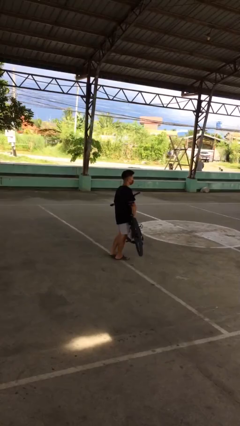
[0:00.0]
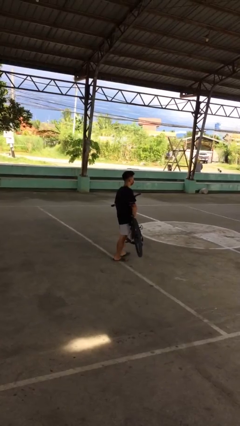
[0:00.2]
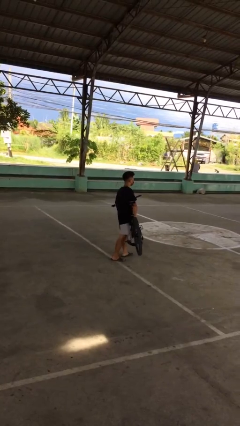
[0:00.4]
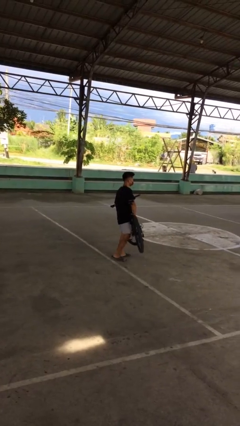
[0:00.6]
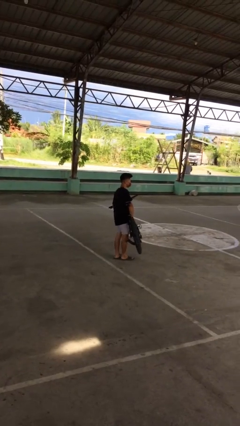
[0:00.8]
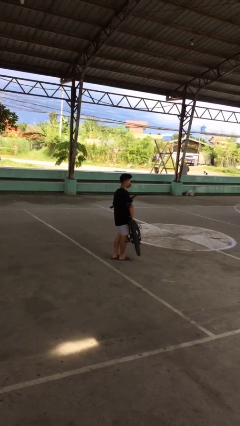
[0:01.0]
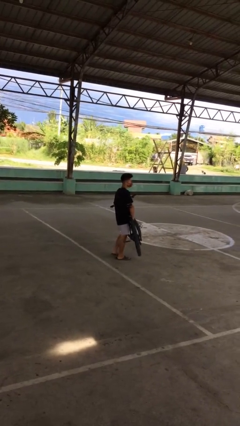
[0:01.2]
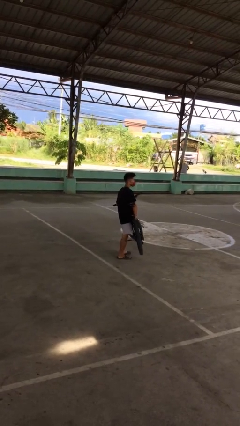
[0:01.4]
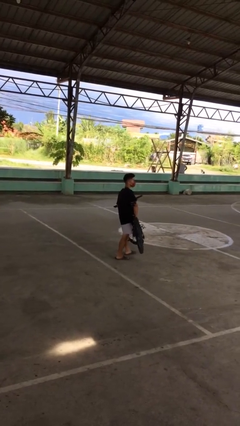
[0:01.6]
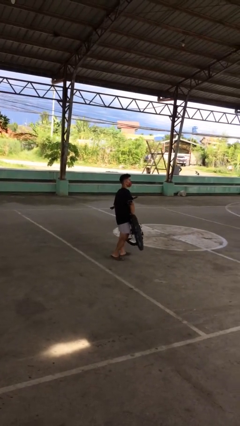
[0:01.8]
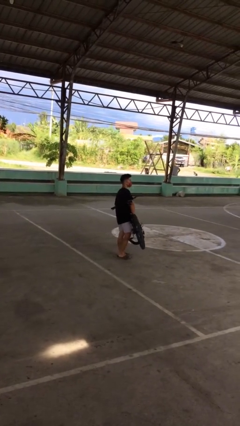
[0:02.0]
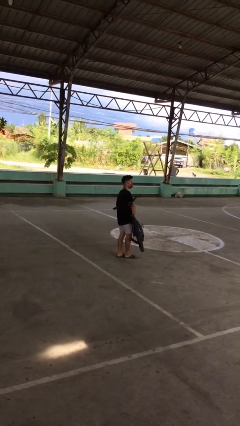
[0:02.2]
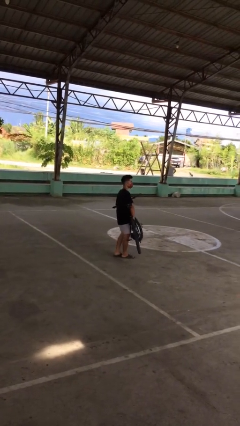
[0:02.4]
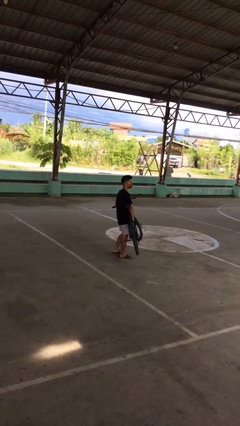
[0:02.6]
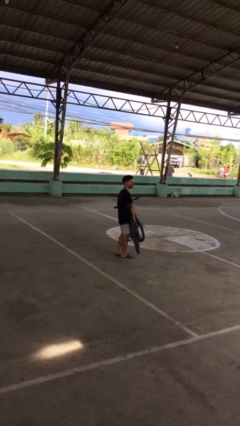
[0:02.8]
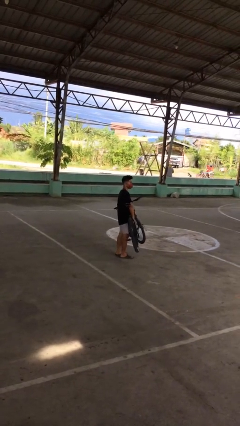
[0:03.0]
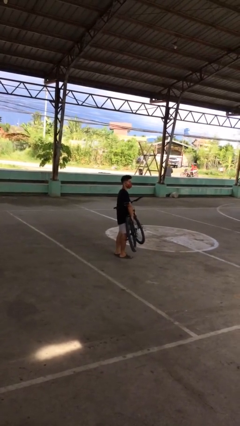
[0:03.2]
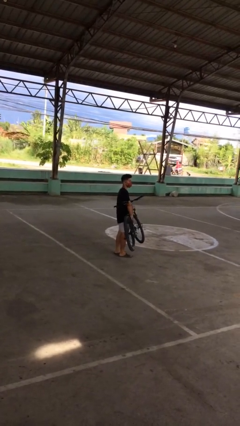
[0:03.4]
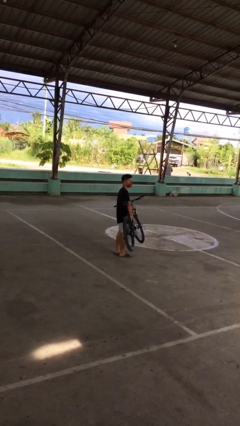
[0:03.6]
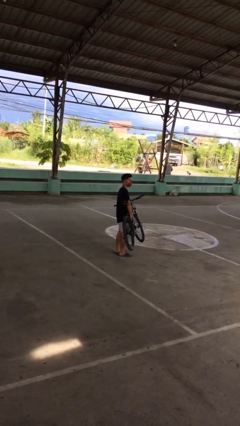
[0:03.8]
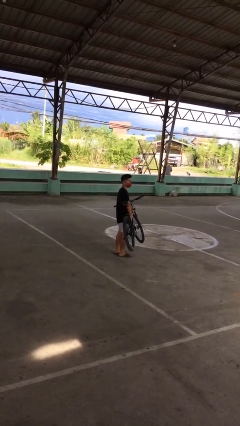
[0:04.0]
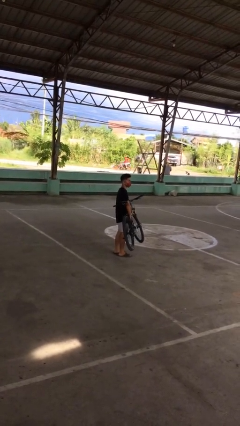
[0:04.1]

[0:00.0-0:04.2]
person carries bicycle

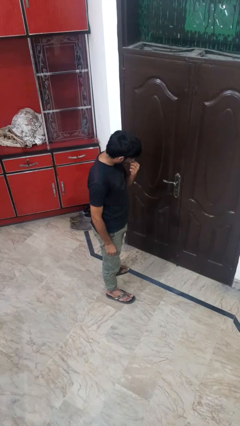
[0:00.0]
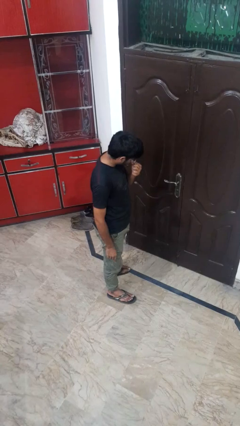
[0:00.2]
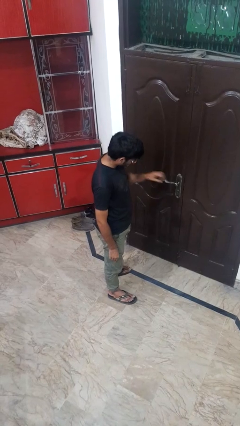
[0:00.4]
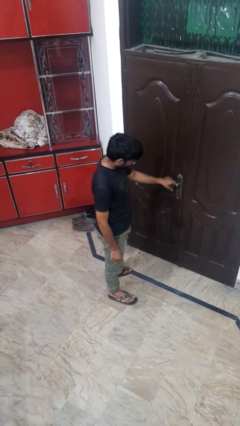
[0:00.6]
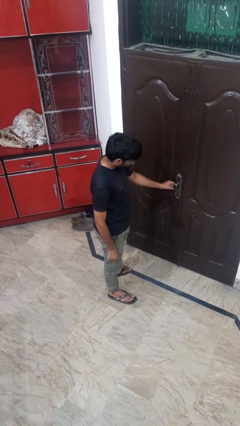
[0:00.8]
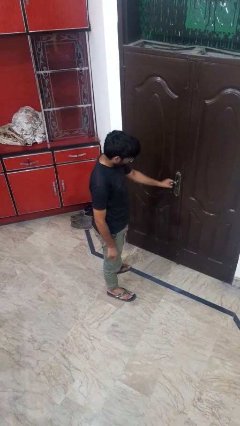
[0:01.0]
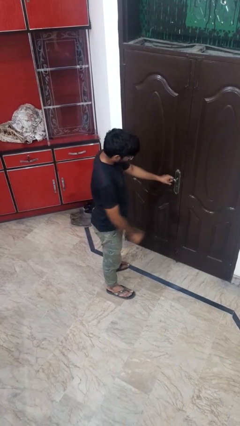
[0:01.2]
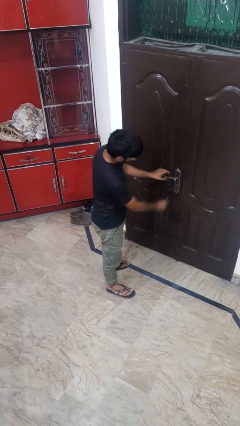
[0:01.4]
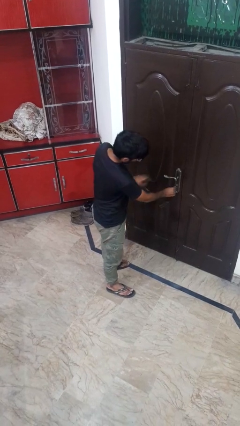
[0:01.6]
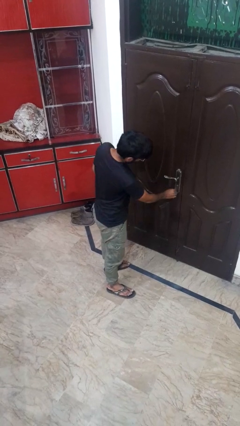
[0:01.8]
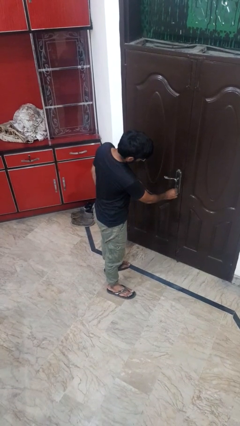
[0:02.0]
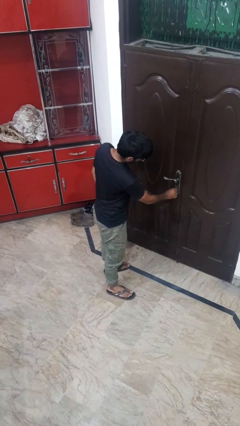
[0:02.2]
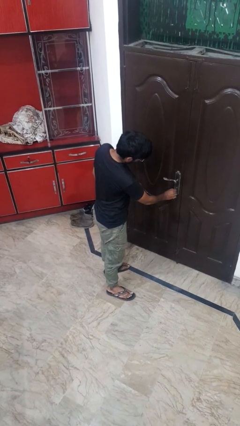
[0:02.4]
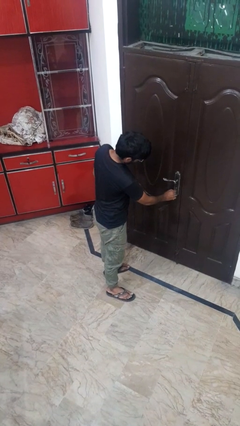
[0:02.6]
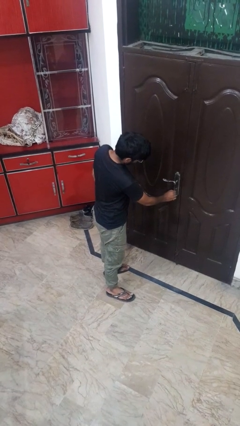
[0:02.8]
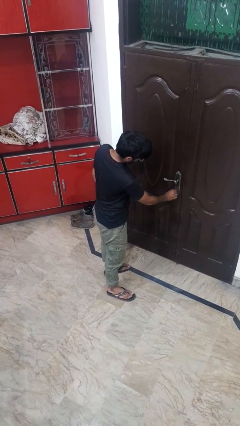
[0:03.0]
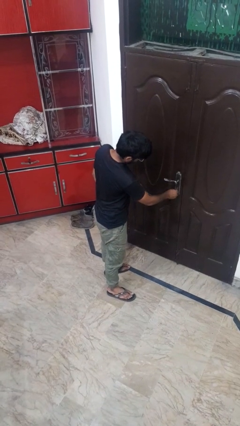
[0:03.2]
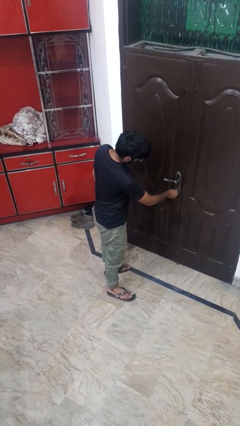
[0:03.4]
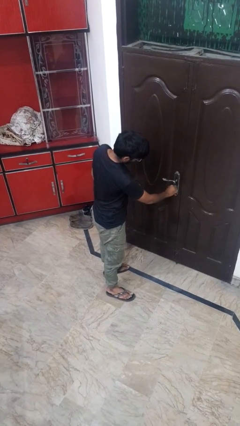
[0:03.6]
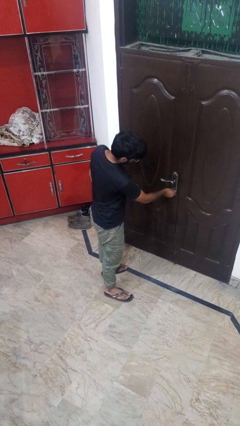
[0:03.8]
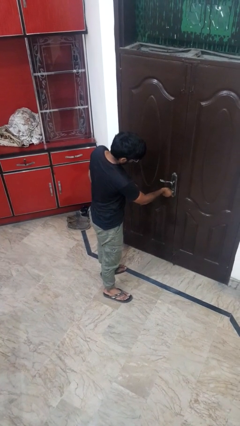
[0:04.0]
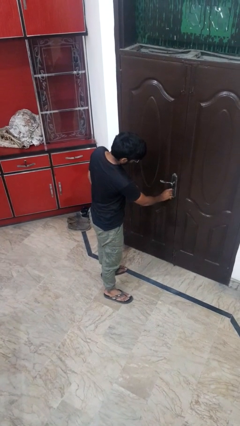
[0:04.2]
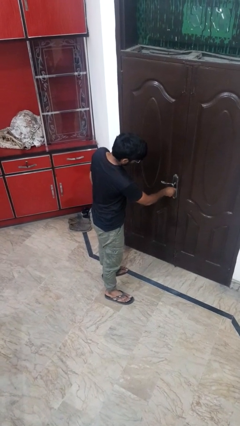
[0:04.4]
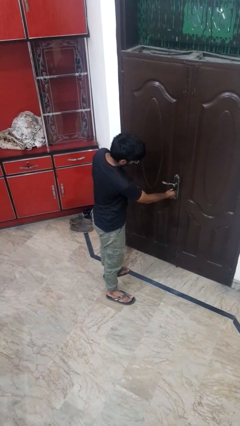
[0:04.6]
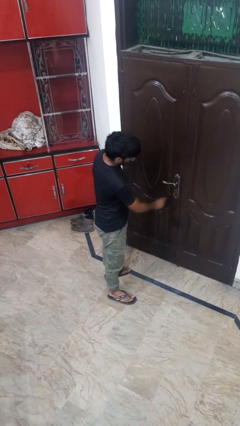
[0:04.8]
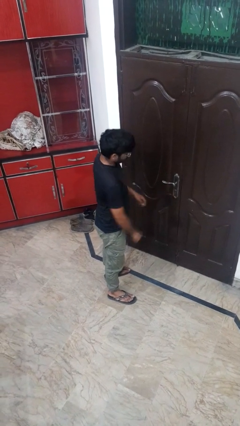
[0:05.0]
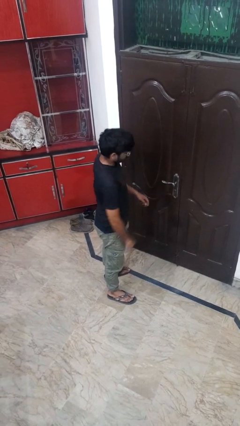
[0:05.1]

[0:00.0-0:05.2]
person unlocks door with keys

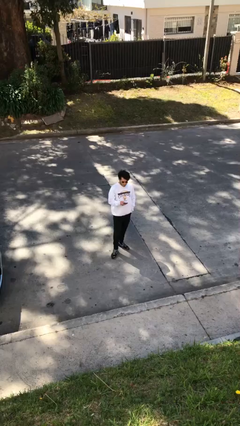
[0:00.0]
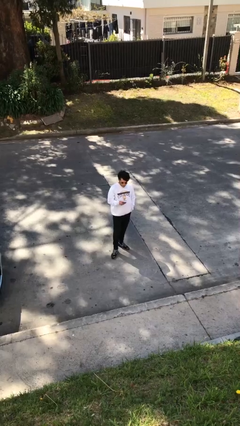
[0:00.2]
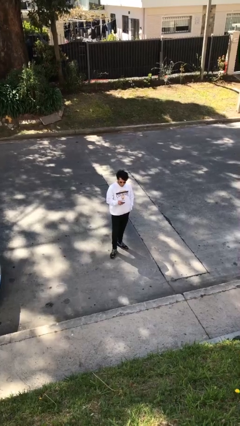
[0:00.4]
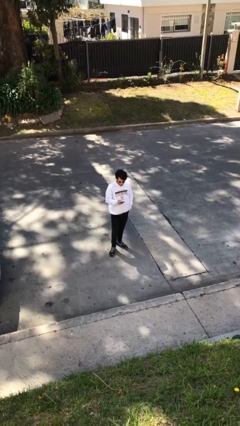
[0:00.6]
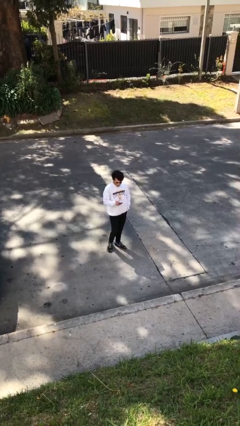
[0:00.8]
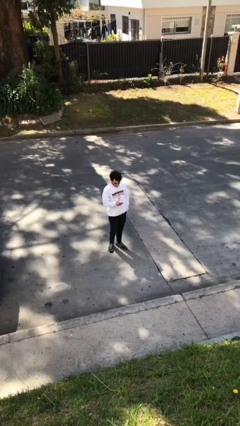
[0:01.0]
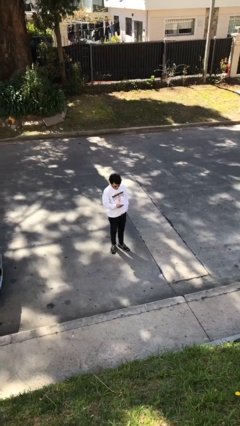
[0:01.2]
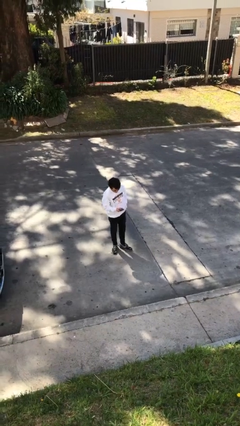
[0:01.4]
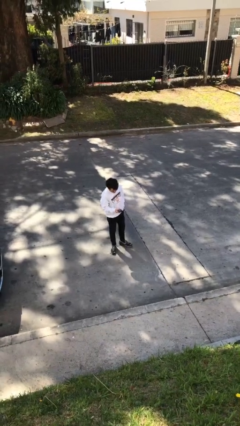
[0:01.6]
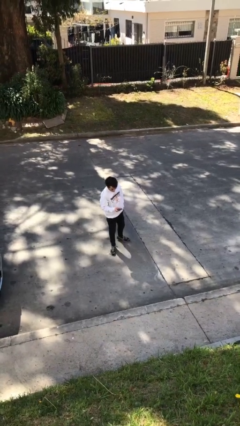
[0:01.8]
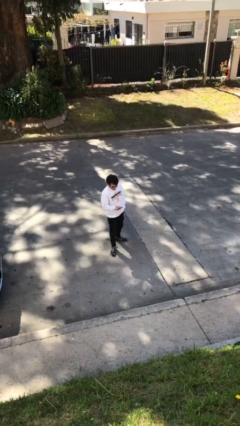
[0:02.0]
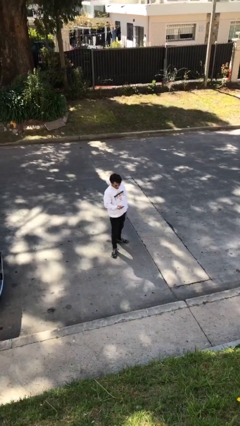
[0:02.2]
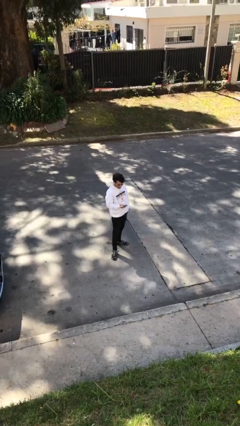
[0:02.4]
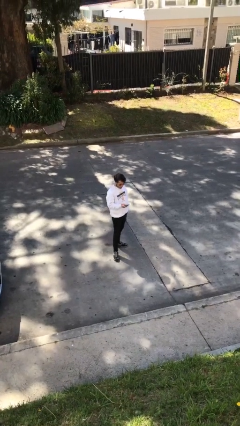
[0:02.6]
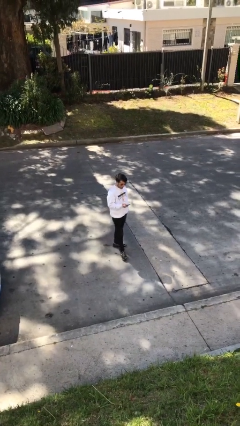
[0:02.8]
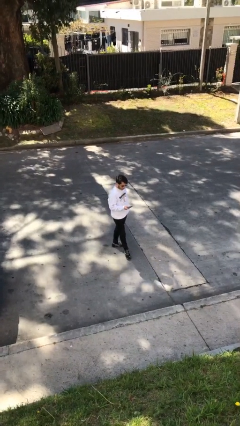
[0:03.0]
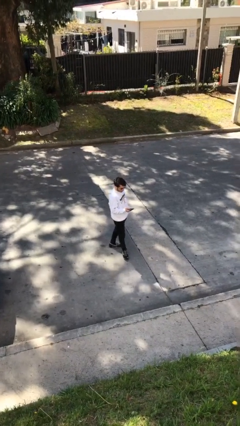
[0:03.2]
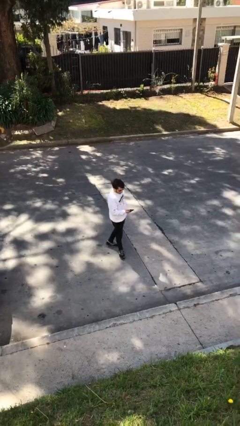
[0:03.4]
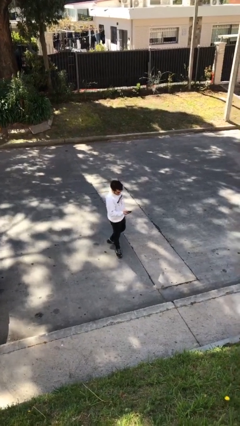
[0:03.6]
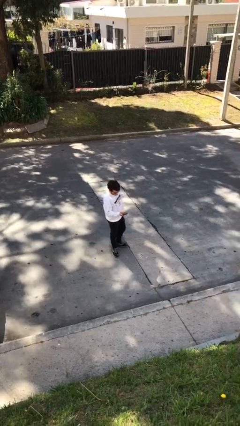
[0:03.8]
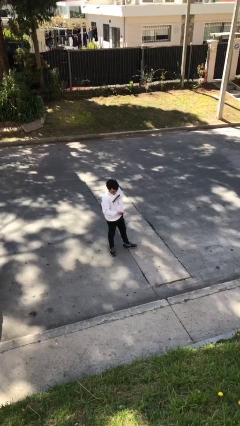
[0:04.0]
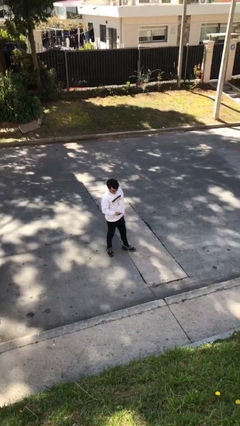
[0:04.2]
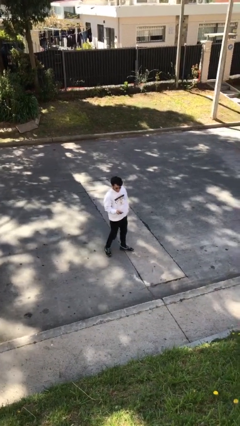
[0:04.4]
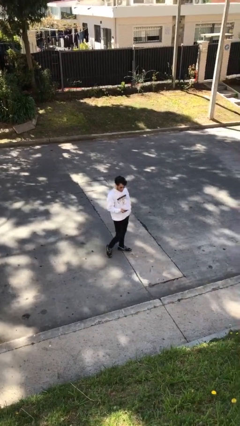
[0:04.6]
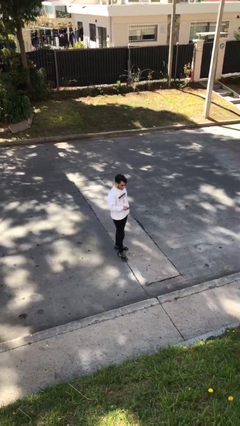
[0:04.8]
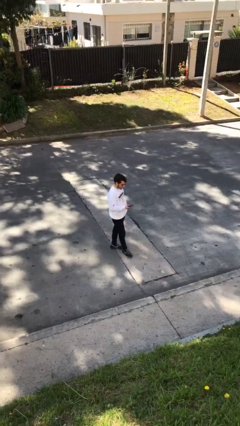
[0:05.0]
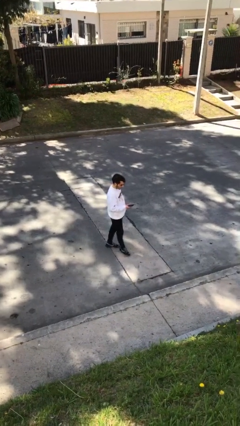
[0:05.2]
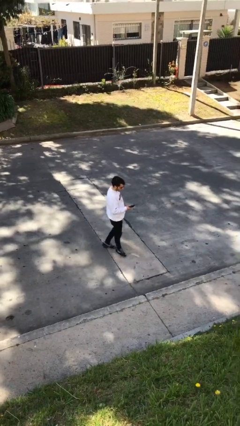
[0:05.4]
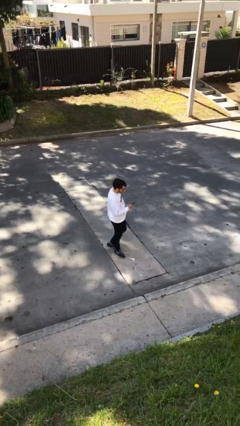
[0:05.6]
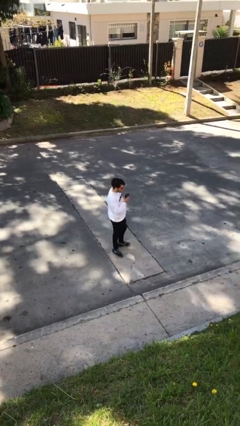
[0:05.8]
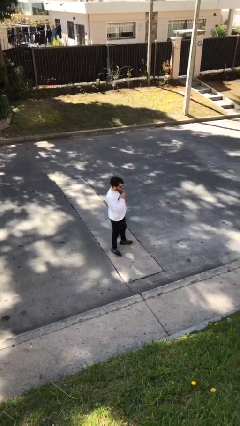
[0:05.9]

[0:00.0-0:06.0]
person texts on phone

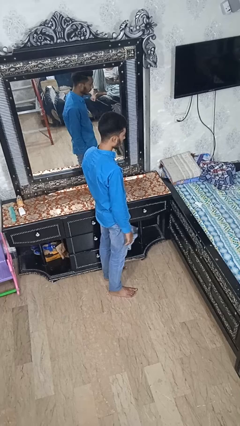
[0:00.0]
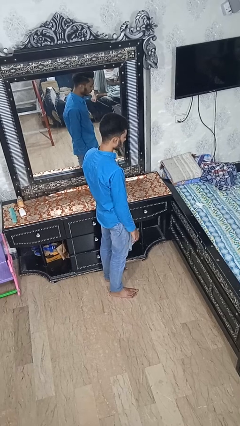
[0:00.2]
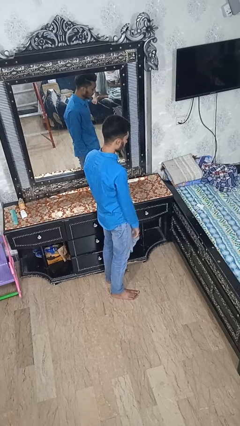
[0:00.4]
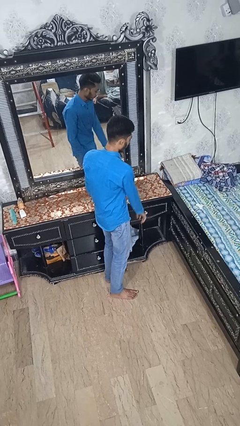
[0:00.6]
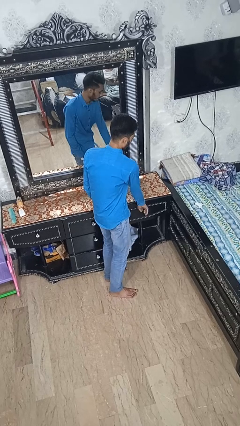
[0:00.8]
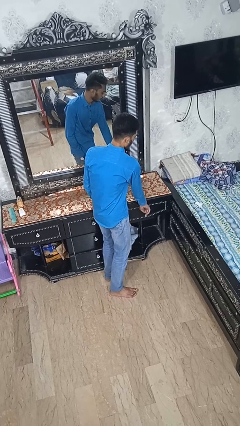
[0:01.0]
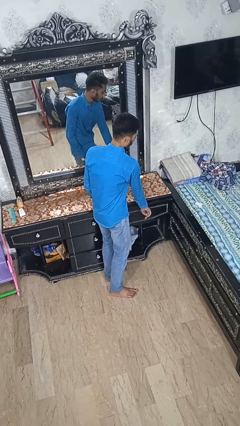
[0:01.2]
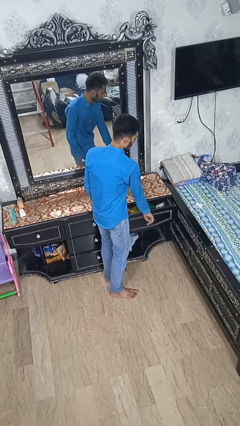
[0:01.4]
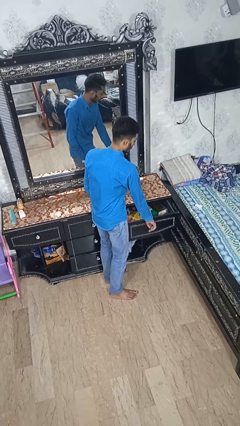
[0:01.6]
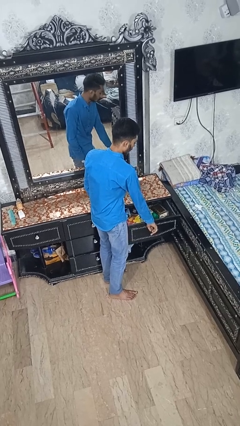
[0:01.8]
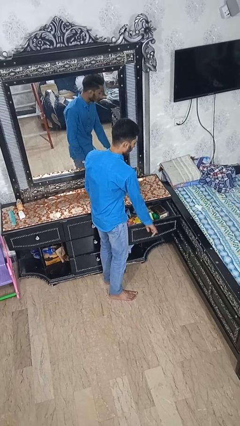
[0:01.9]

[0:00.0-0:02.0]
person opens dresser drawer

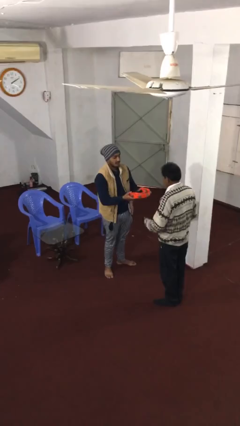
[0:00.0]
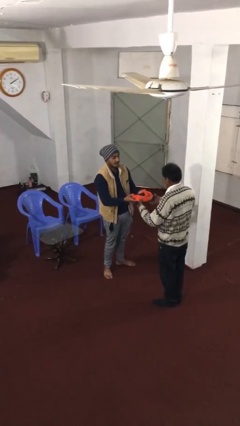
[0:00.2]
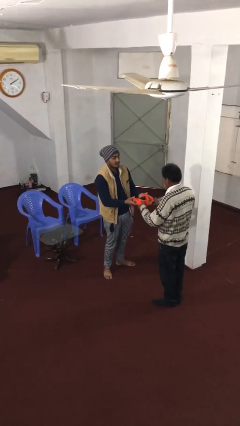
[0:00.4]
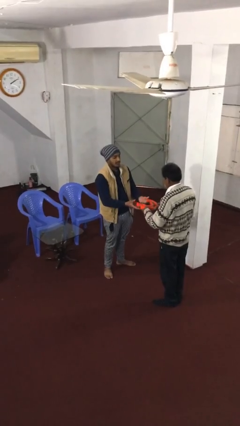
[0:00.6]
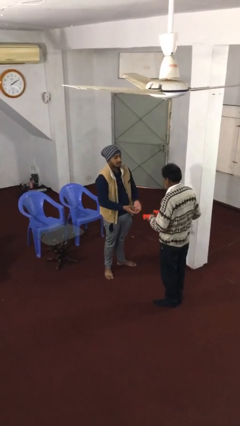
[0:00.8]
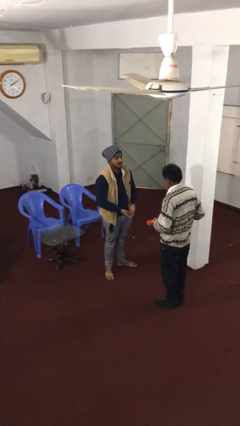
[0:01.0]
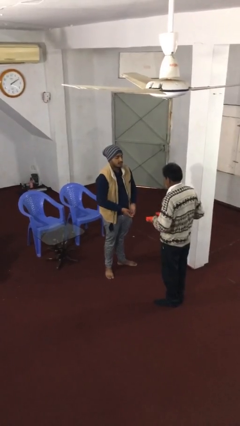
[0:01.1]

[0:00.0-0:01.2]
person transfers object to person
